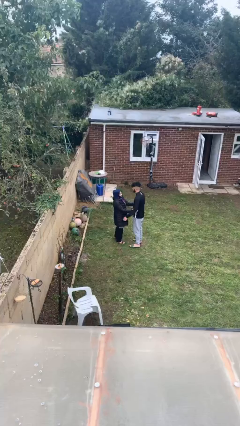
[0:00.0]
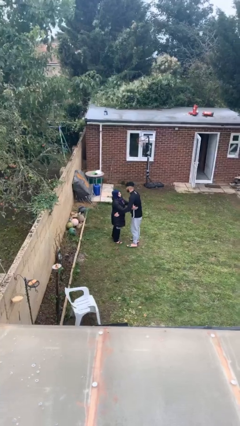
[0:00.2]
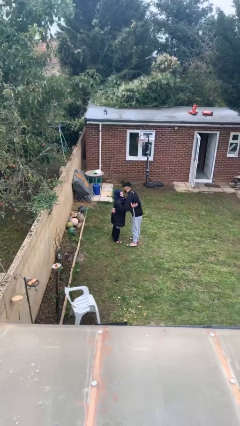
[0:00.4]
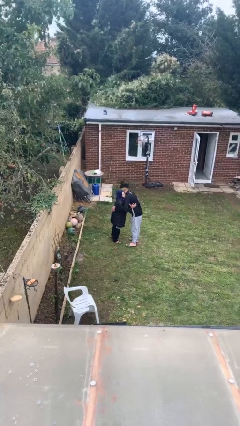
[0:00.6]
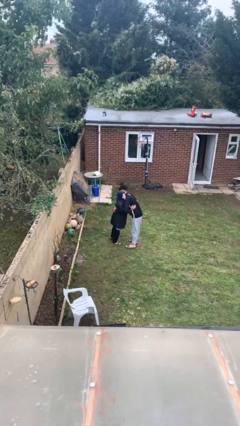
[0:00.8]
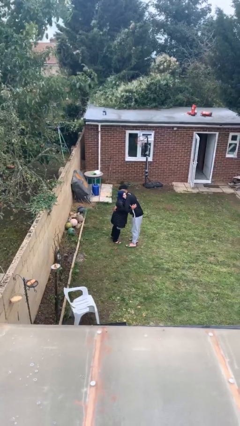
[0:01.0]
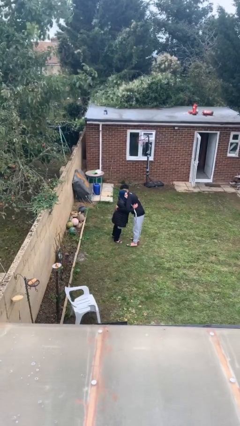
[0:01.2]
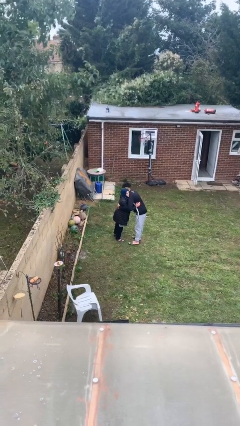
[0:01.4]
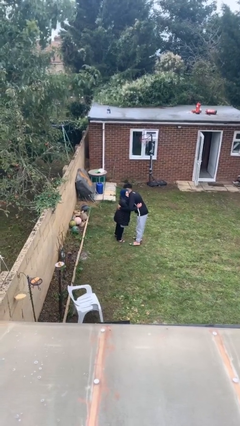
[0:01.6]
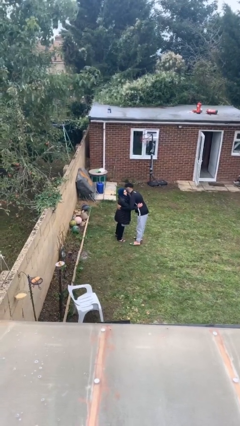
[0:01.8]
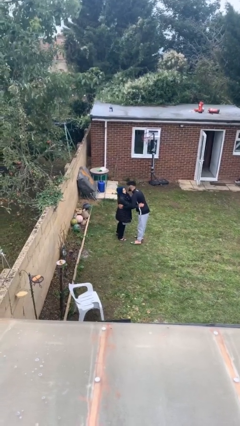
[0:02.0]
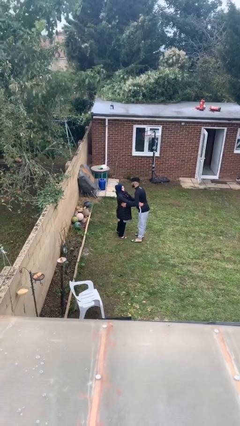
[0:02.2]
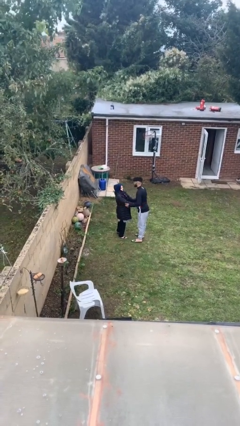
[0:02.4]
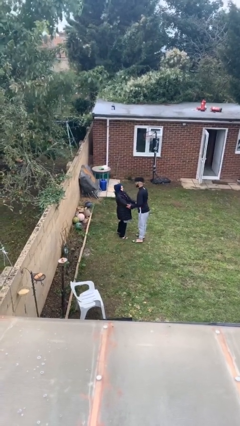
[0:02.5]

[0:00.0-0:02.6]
person embraces person

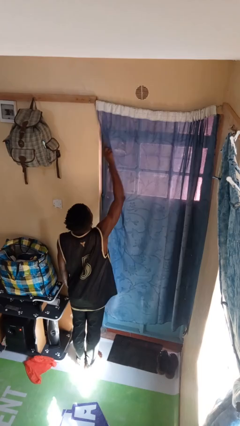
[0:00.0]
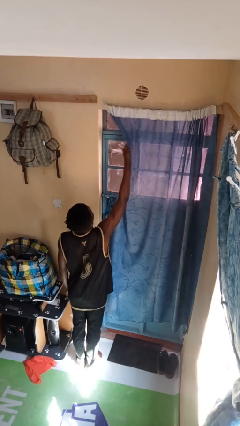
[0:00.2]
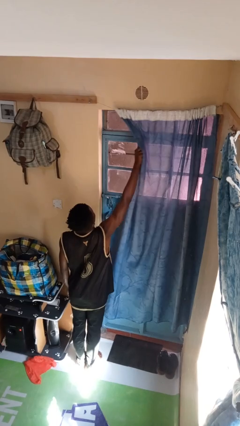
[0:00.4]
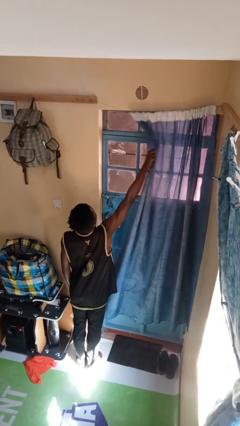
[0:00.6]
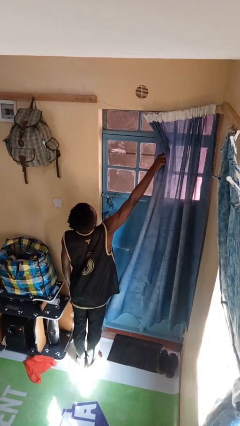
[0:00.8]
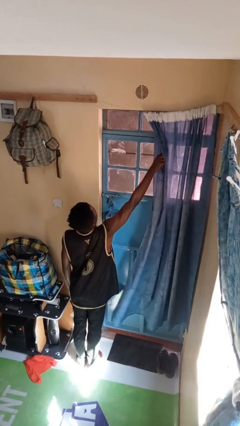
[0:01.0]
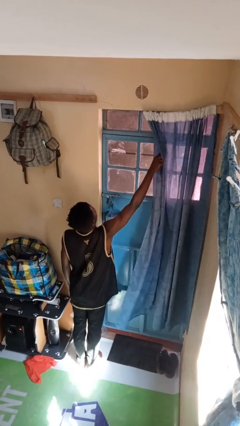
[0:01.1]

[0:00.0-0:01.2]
person opens curtains

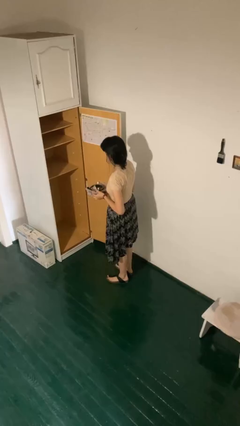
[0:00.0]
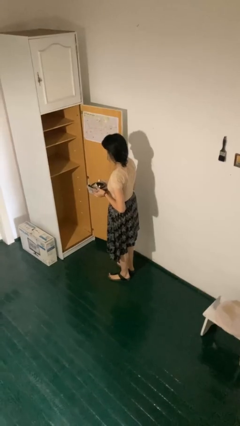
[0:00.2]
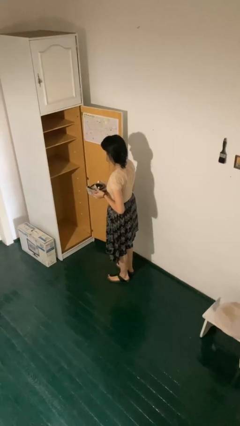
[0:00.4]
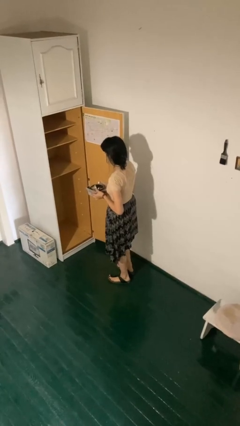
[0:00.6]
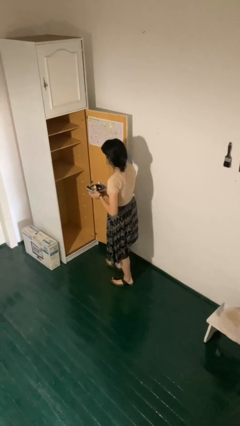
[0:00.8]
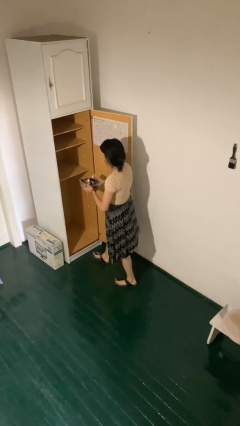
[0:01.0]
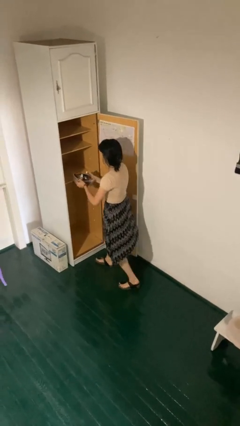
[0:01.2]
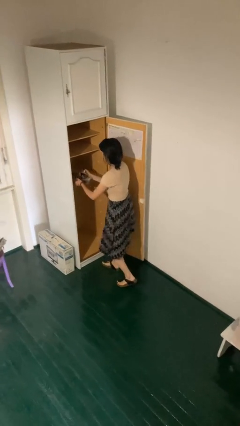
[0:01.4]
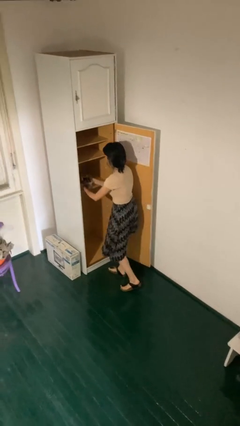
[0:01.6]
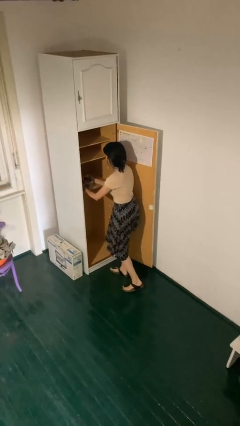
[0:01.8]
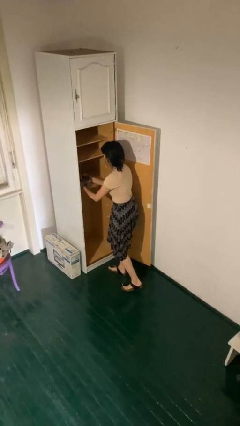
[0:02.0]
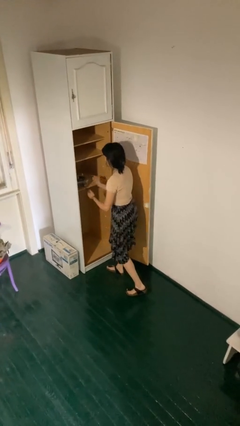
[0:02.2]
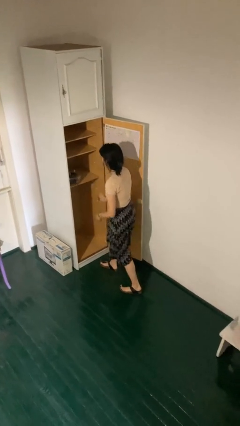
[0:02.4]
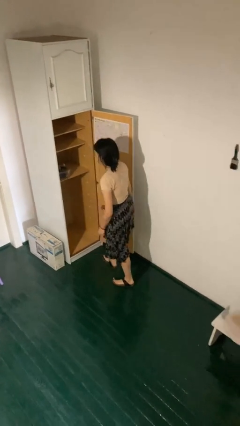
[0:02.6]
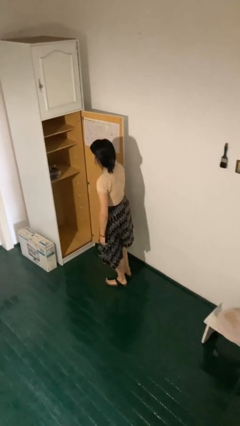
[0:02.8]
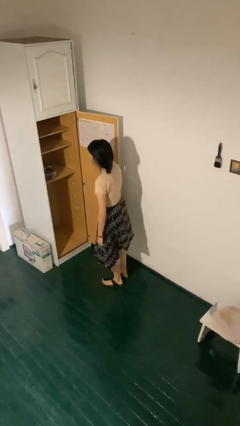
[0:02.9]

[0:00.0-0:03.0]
person puts down object into cabinet

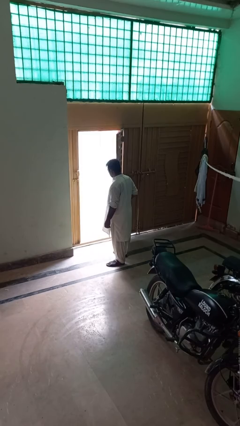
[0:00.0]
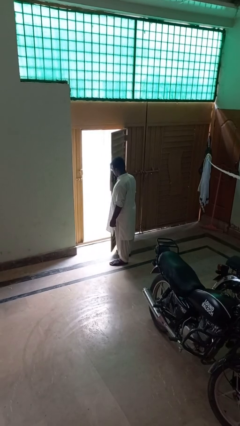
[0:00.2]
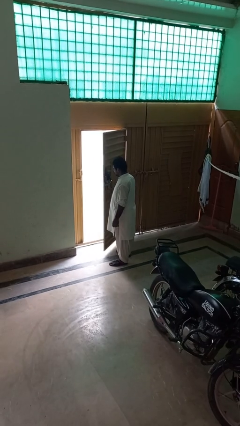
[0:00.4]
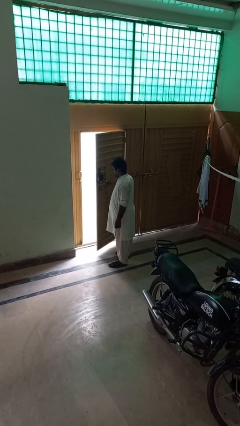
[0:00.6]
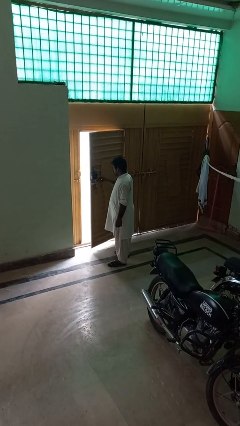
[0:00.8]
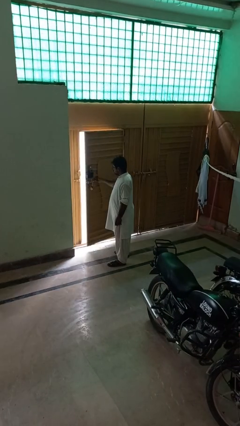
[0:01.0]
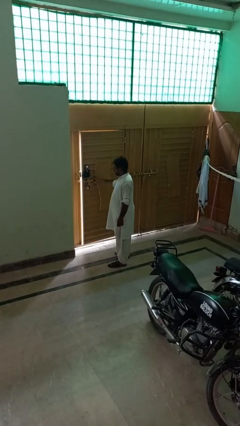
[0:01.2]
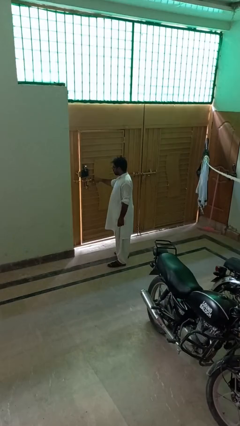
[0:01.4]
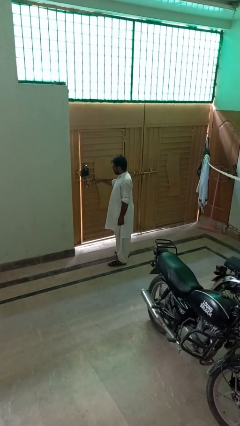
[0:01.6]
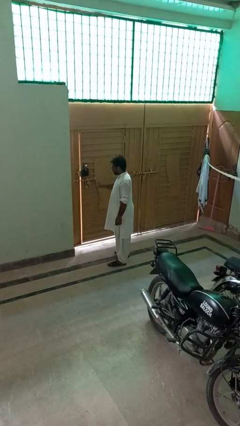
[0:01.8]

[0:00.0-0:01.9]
person closes gate

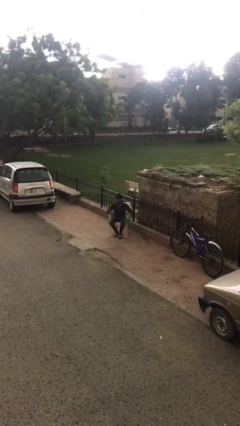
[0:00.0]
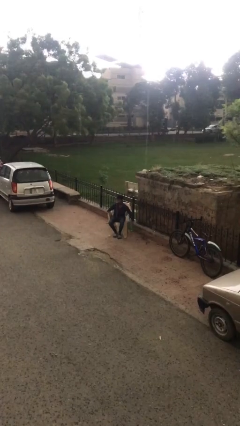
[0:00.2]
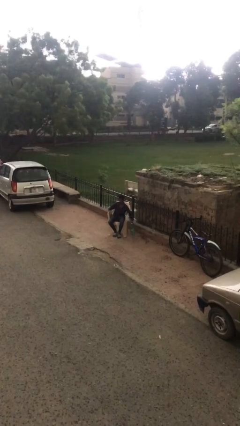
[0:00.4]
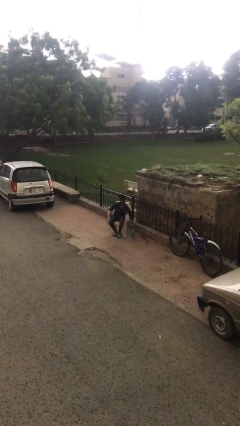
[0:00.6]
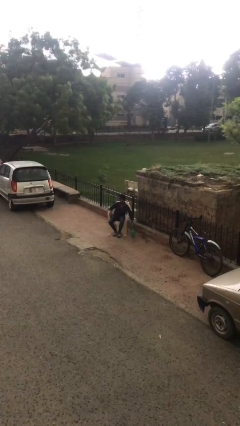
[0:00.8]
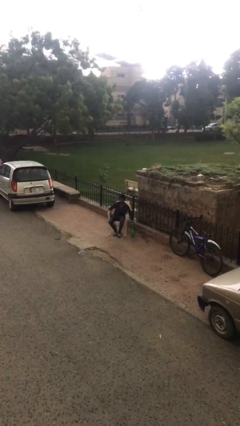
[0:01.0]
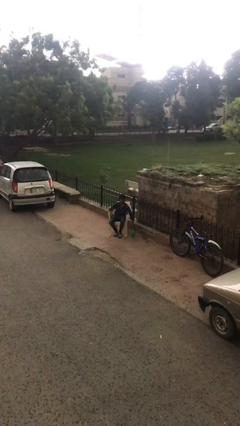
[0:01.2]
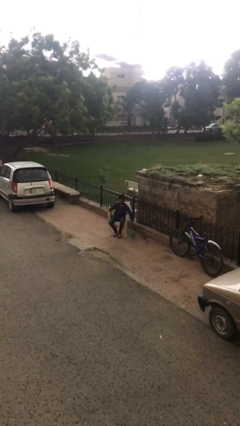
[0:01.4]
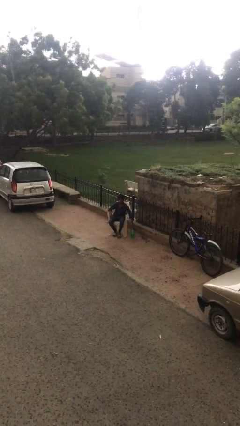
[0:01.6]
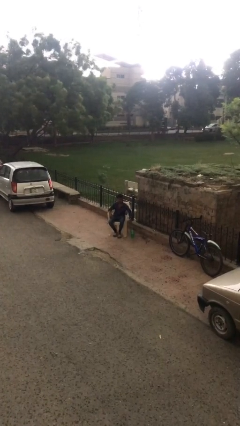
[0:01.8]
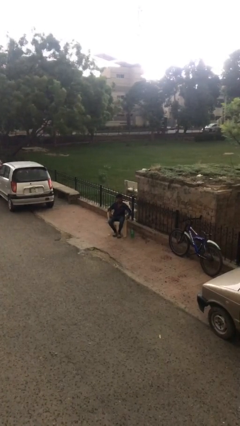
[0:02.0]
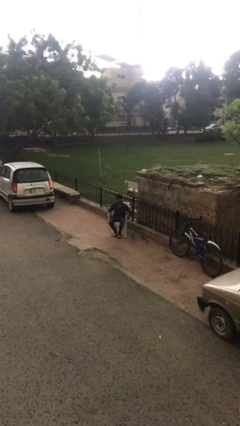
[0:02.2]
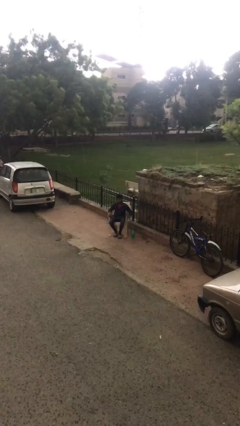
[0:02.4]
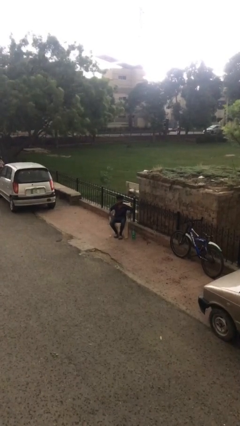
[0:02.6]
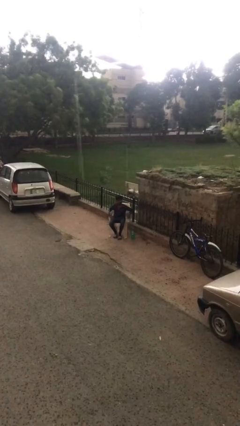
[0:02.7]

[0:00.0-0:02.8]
person puts down object on floor

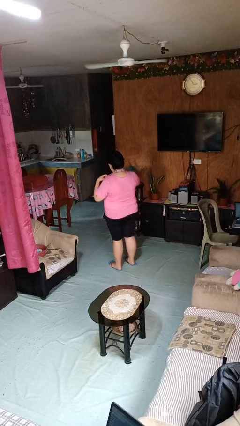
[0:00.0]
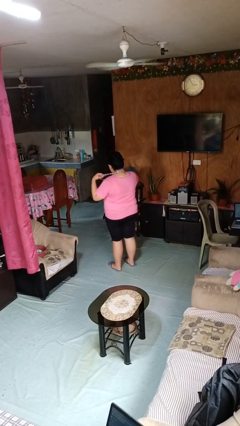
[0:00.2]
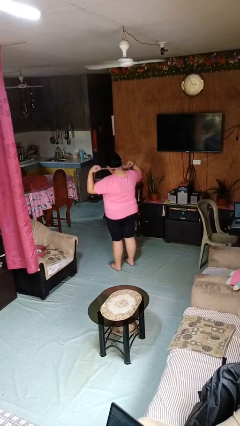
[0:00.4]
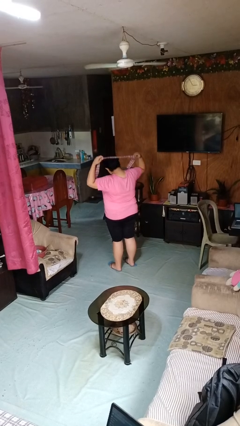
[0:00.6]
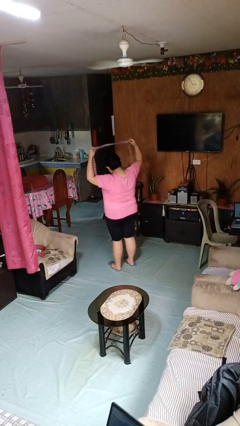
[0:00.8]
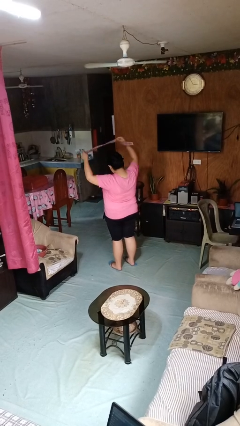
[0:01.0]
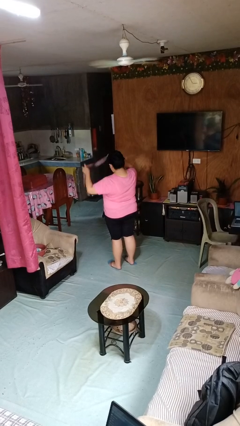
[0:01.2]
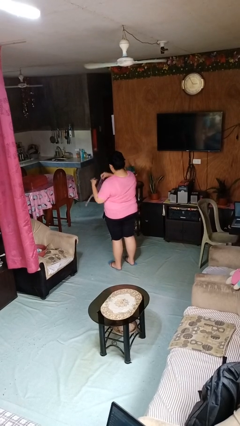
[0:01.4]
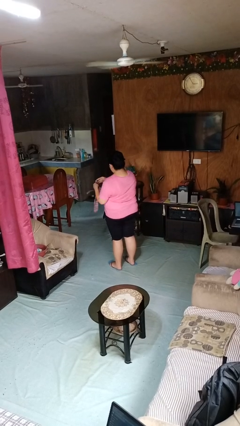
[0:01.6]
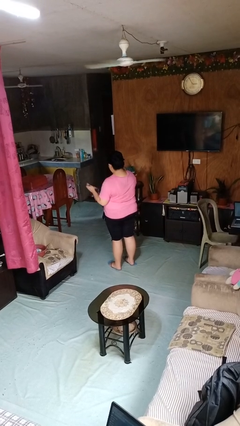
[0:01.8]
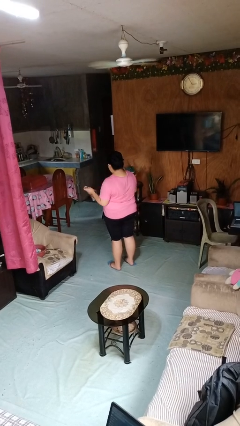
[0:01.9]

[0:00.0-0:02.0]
person takes off necktie

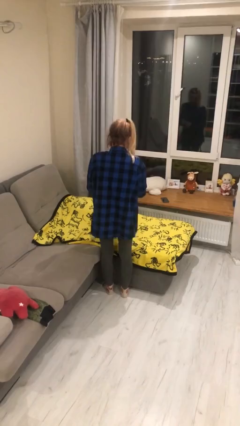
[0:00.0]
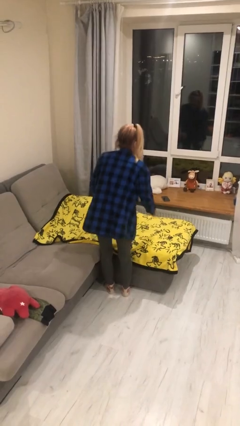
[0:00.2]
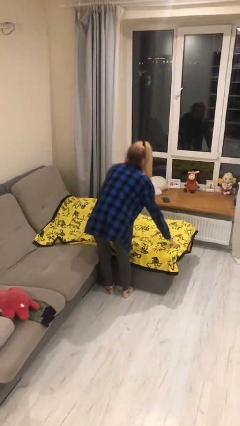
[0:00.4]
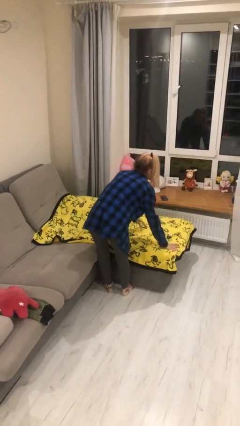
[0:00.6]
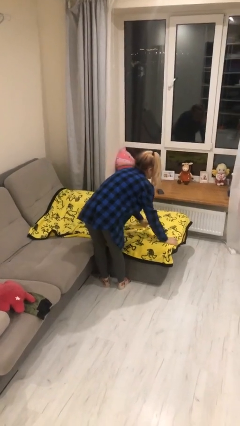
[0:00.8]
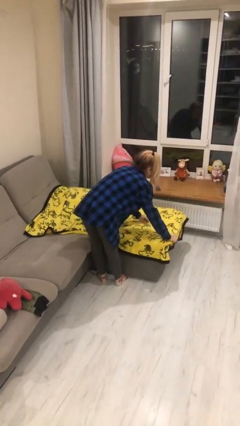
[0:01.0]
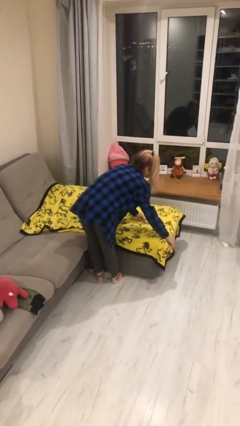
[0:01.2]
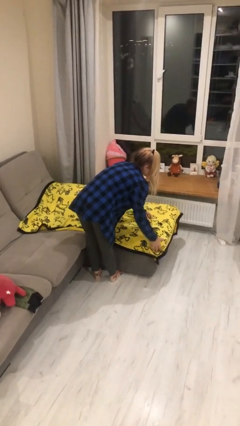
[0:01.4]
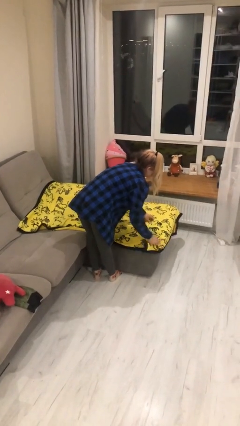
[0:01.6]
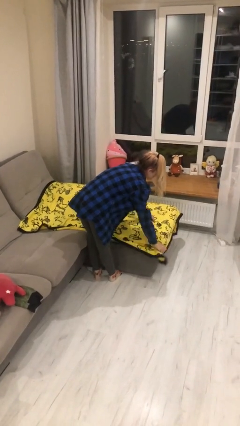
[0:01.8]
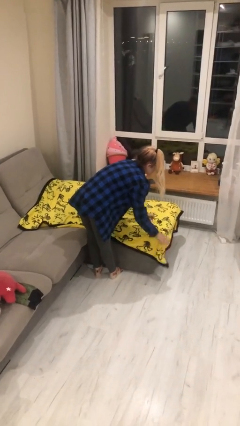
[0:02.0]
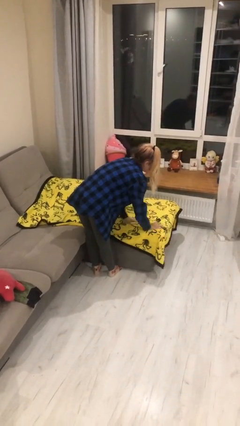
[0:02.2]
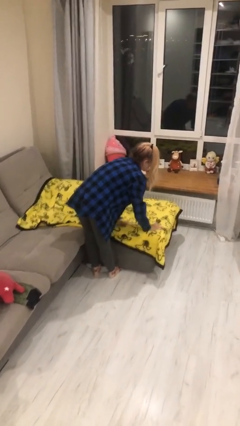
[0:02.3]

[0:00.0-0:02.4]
person makes bed

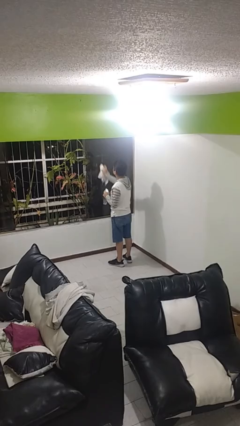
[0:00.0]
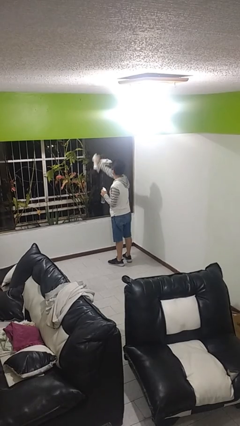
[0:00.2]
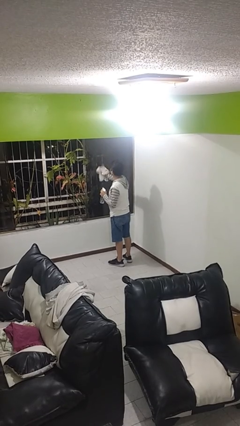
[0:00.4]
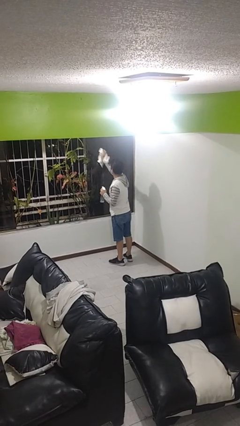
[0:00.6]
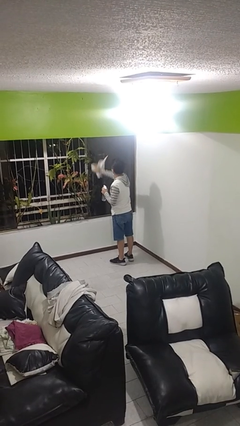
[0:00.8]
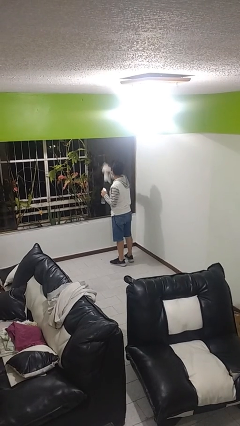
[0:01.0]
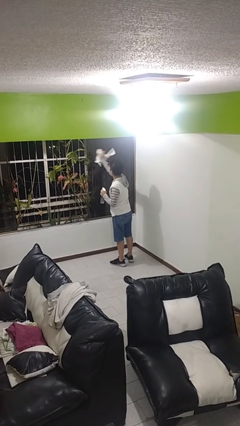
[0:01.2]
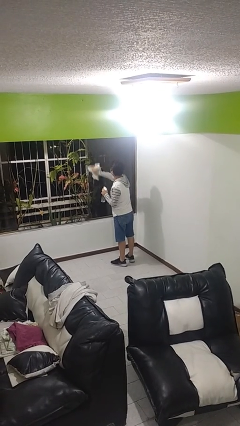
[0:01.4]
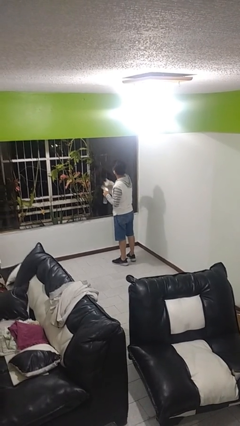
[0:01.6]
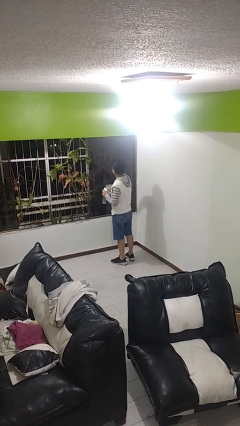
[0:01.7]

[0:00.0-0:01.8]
person washes window
